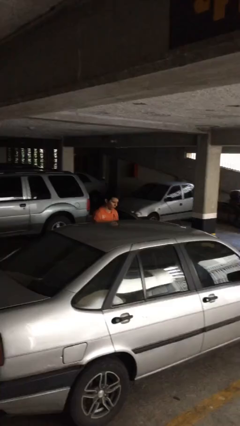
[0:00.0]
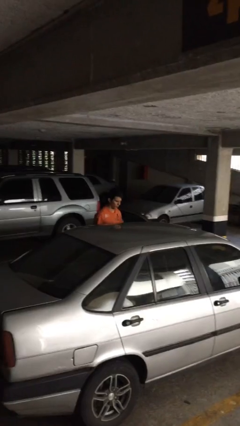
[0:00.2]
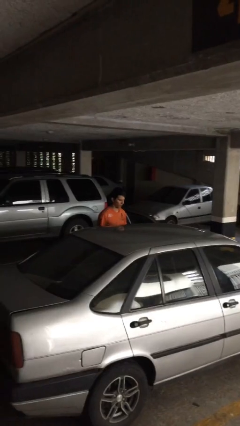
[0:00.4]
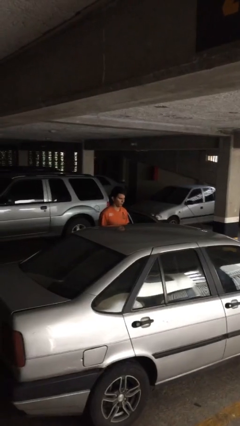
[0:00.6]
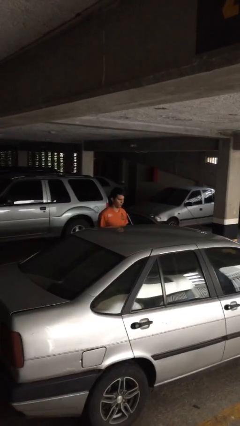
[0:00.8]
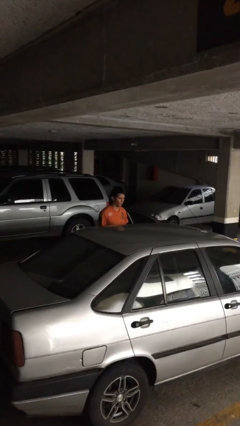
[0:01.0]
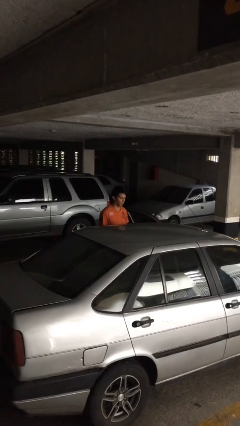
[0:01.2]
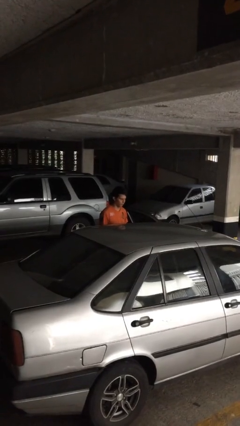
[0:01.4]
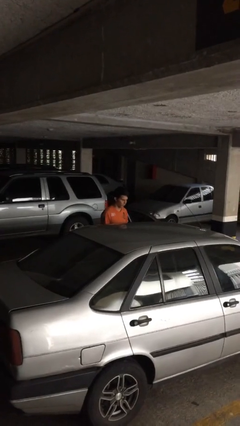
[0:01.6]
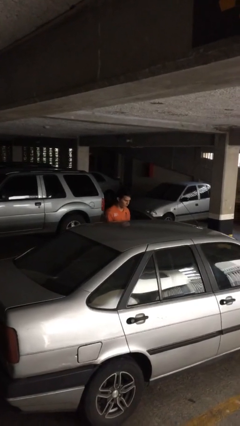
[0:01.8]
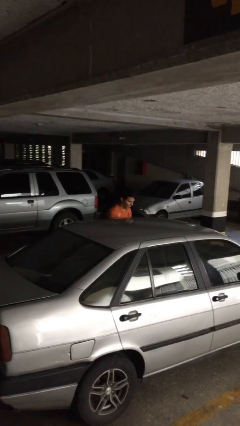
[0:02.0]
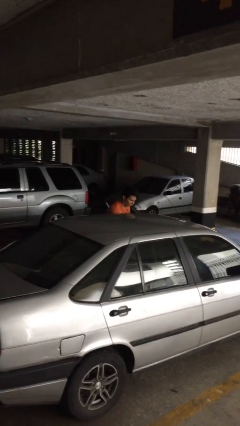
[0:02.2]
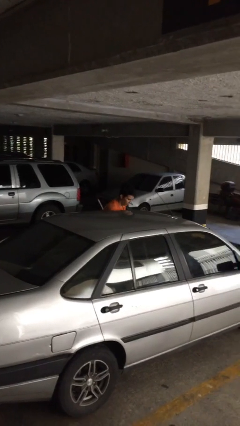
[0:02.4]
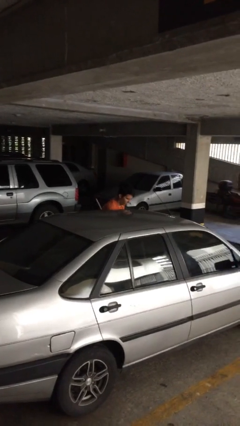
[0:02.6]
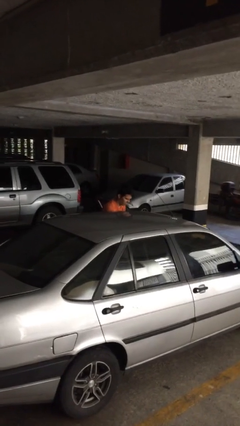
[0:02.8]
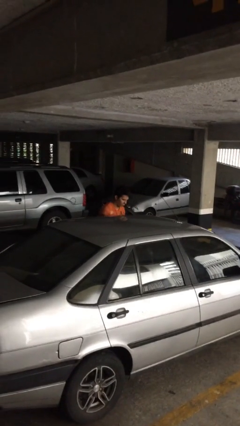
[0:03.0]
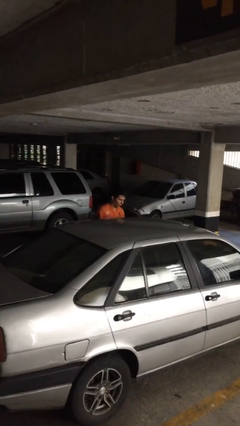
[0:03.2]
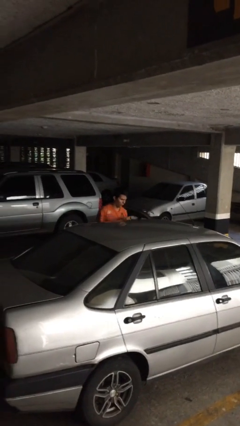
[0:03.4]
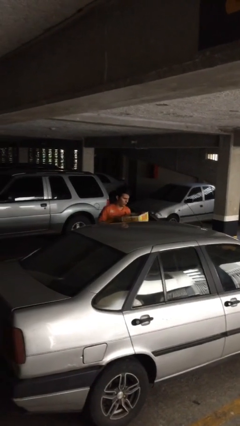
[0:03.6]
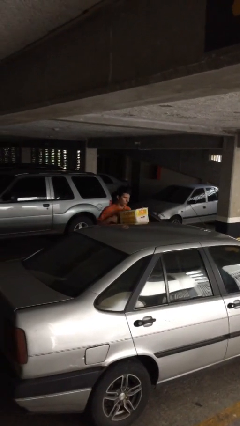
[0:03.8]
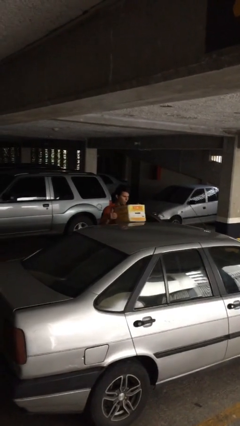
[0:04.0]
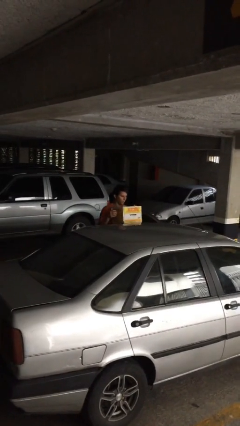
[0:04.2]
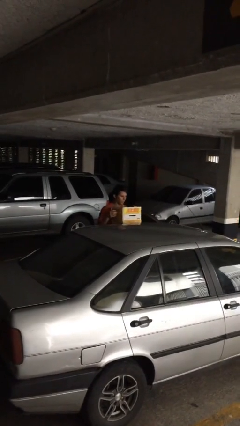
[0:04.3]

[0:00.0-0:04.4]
person unloads car

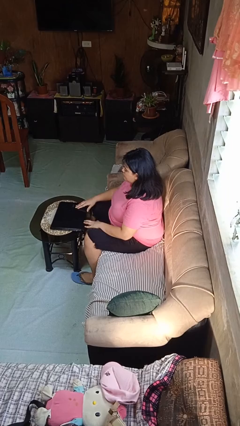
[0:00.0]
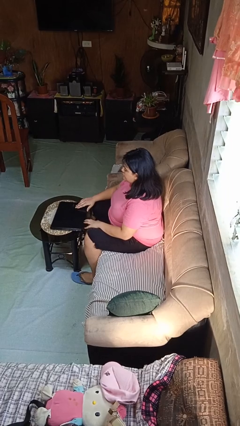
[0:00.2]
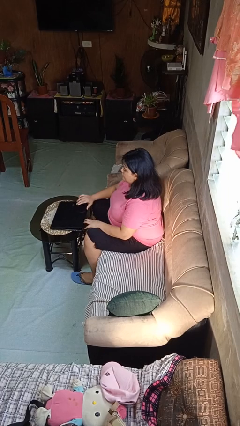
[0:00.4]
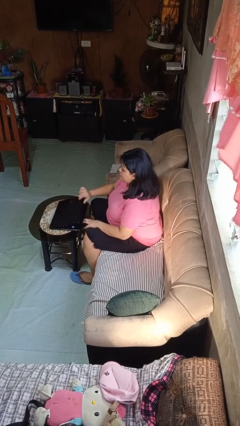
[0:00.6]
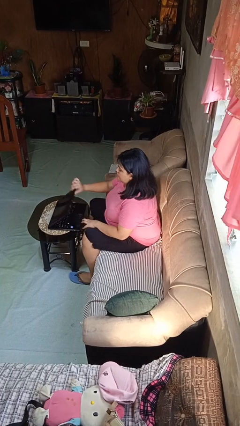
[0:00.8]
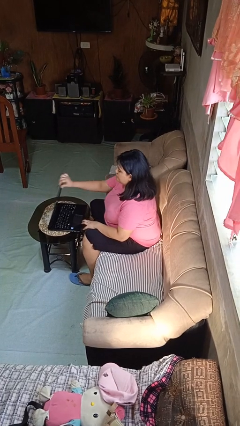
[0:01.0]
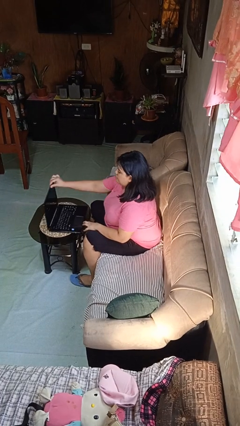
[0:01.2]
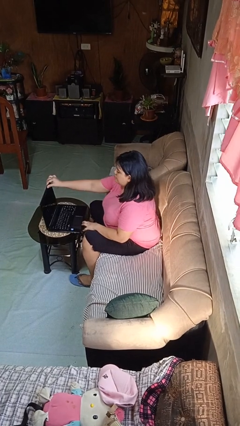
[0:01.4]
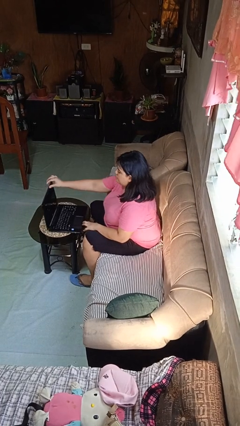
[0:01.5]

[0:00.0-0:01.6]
person opens laptop

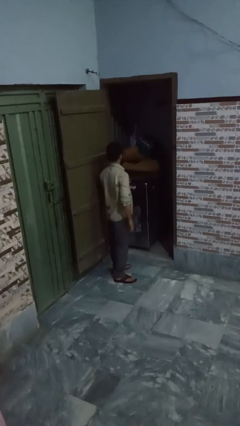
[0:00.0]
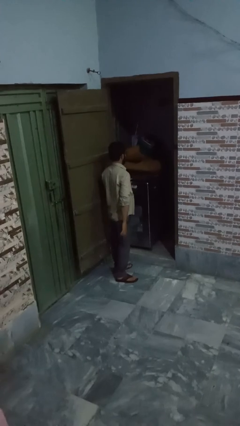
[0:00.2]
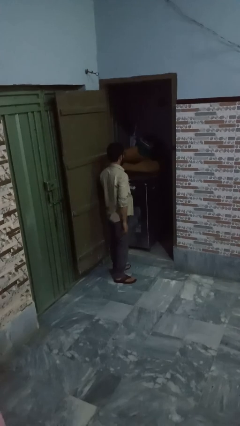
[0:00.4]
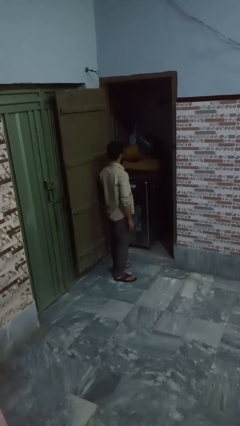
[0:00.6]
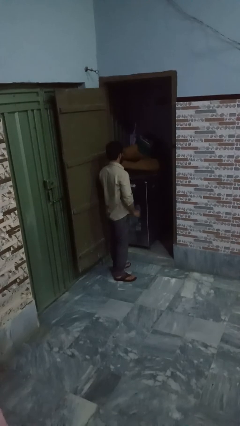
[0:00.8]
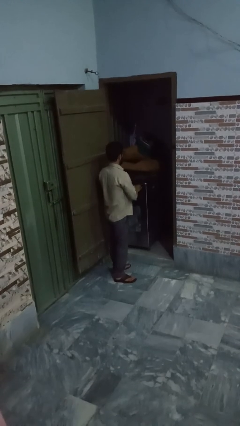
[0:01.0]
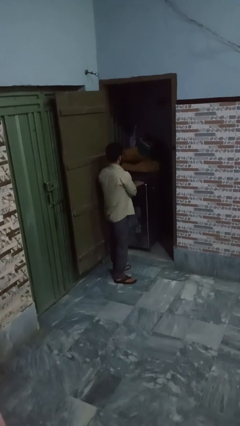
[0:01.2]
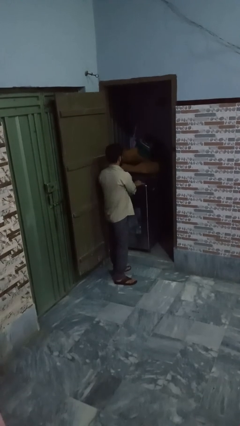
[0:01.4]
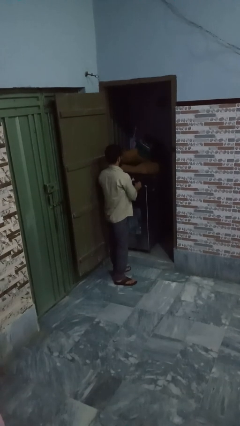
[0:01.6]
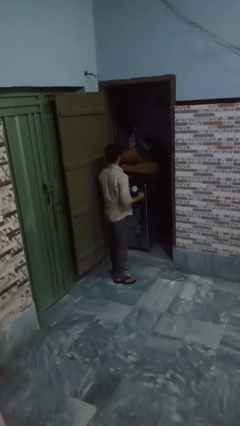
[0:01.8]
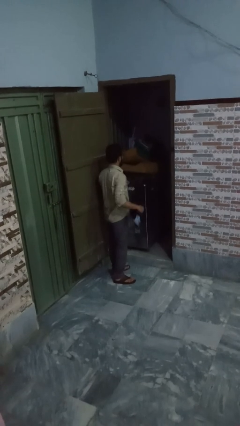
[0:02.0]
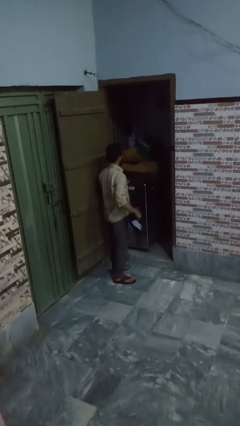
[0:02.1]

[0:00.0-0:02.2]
person unloads dryer

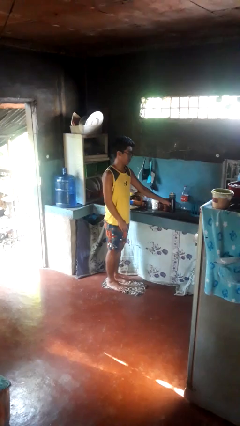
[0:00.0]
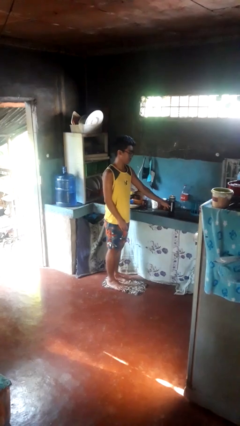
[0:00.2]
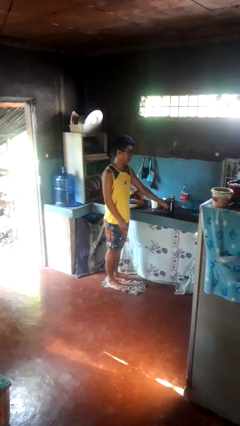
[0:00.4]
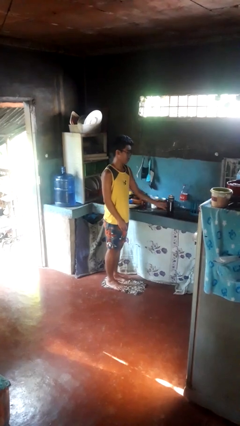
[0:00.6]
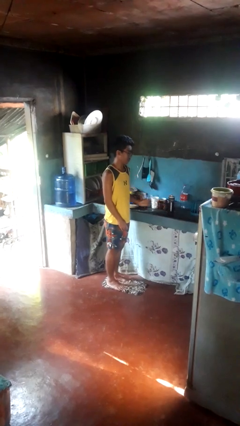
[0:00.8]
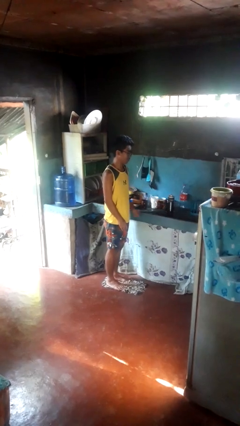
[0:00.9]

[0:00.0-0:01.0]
person puts down object on countertop

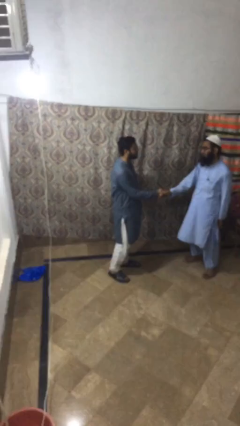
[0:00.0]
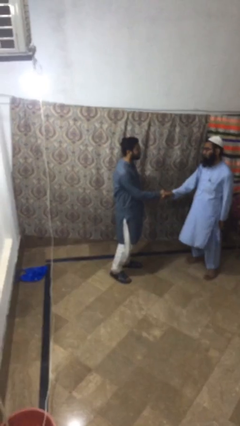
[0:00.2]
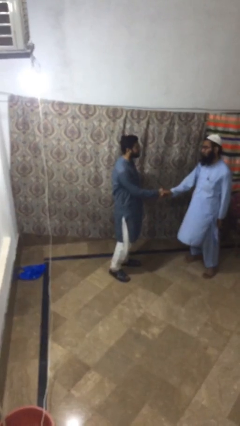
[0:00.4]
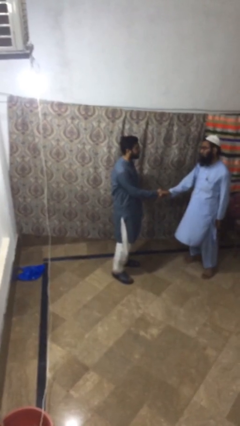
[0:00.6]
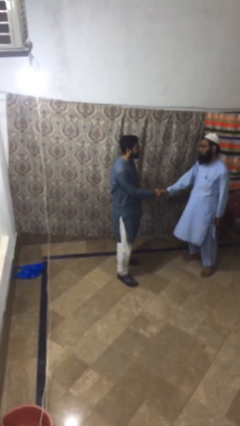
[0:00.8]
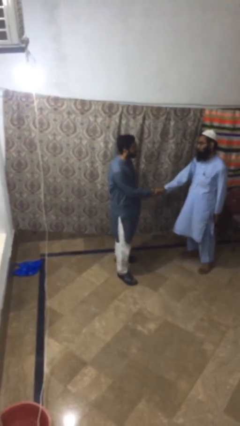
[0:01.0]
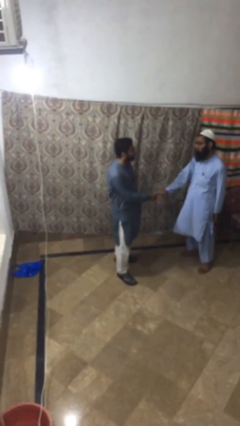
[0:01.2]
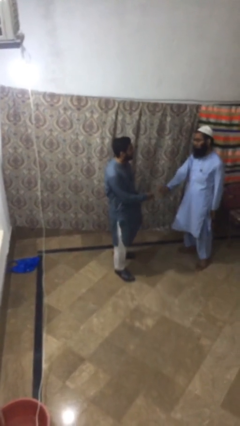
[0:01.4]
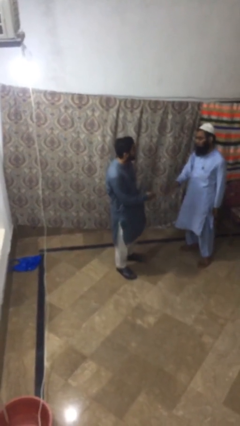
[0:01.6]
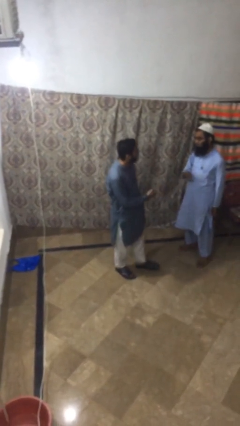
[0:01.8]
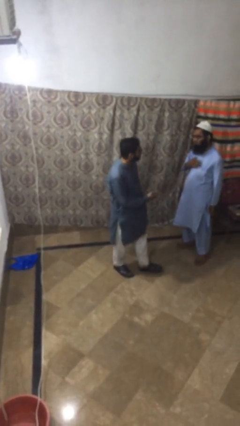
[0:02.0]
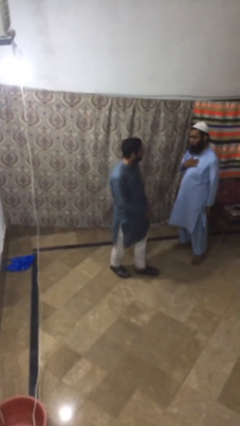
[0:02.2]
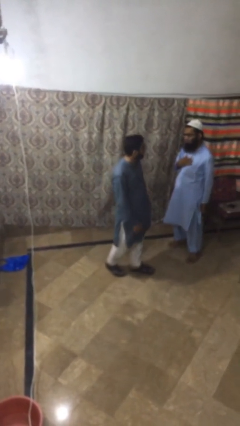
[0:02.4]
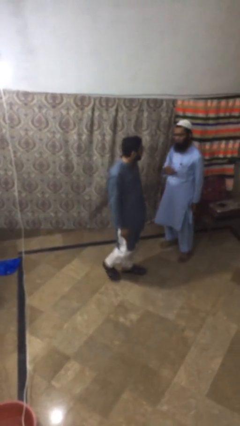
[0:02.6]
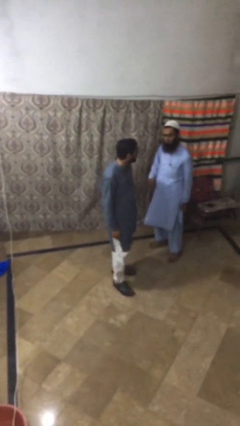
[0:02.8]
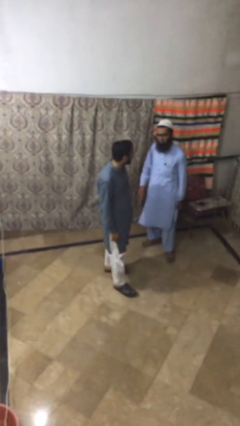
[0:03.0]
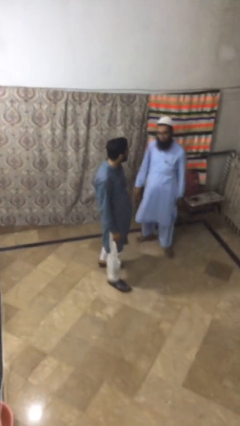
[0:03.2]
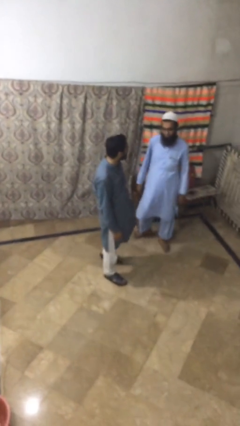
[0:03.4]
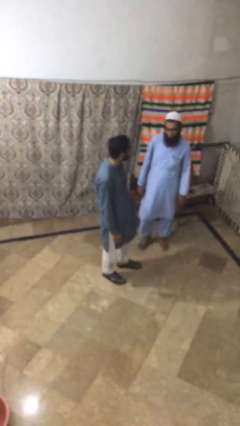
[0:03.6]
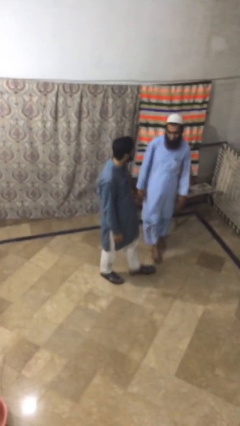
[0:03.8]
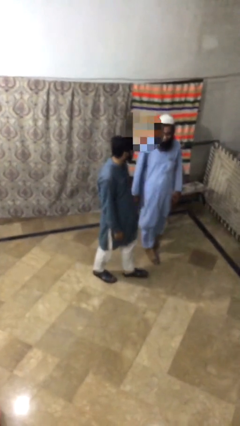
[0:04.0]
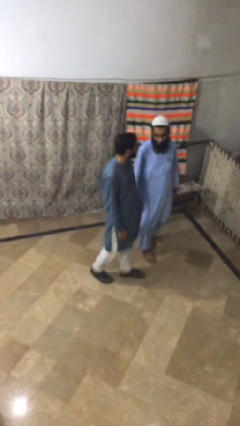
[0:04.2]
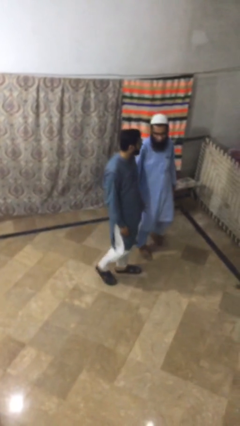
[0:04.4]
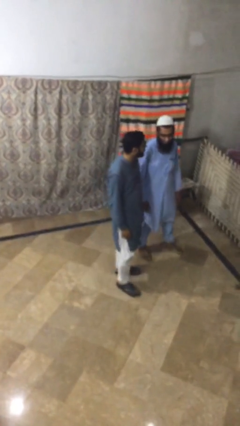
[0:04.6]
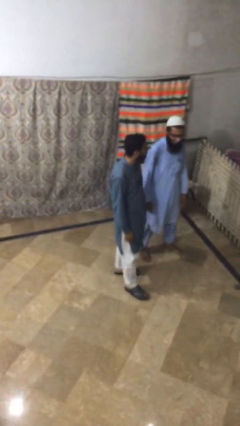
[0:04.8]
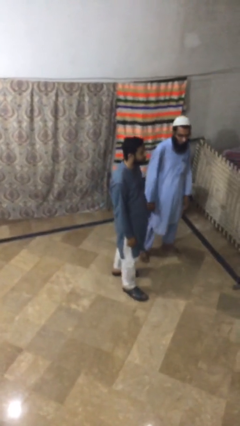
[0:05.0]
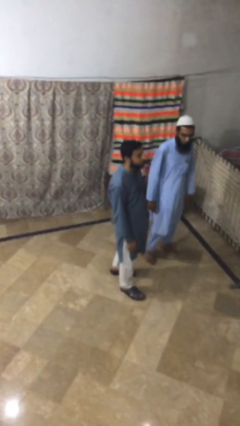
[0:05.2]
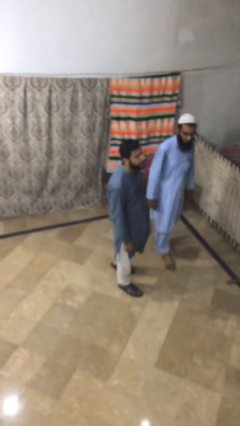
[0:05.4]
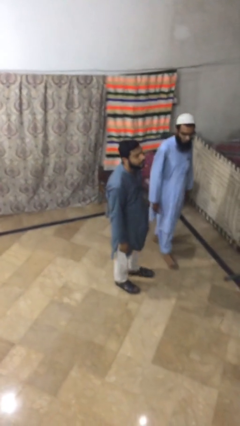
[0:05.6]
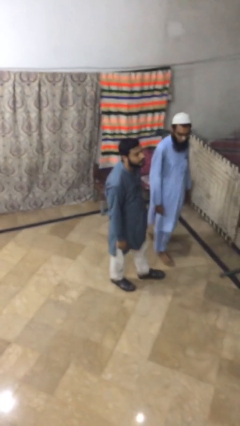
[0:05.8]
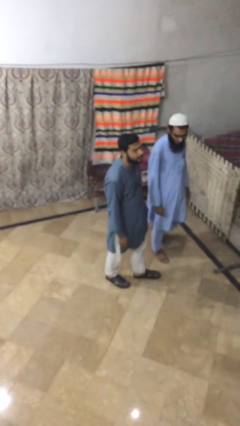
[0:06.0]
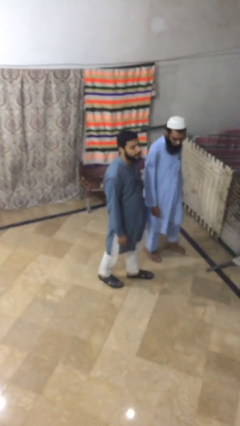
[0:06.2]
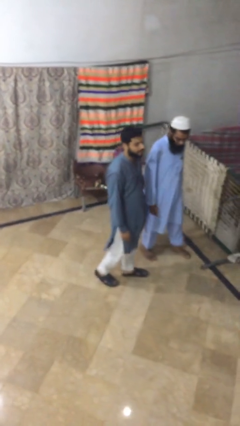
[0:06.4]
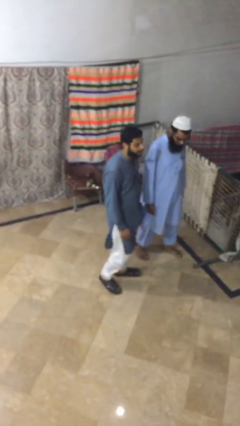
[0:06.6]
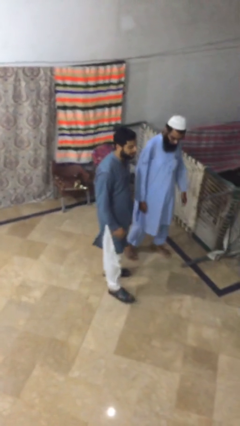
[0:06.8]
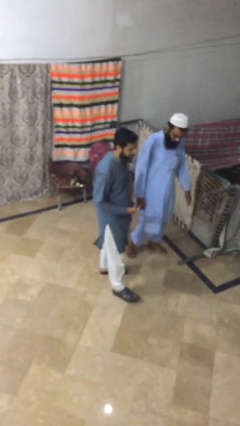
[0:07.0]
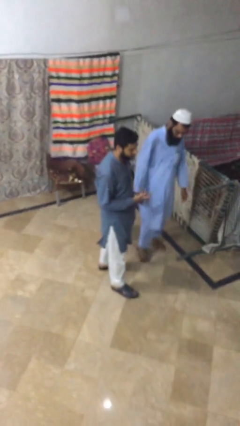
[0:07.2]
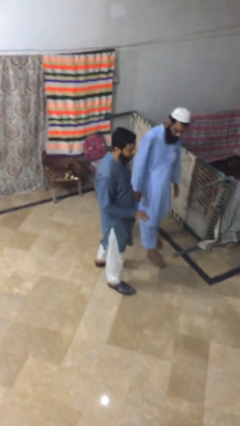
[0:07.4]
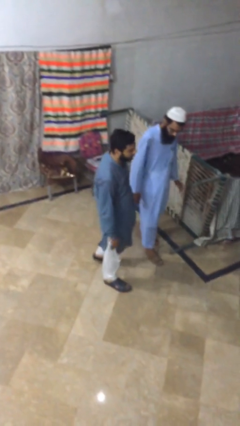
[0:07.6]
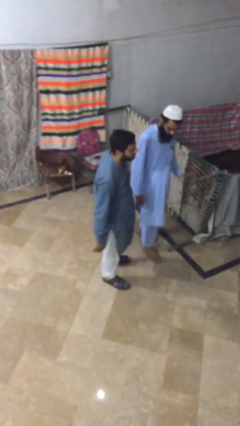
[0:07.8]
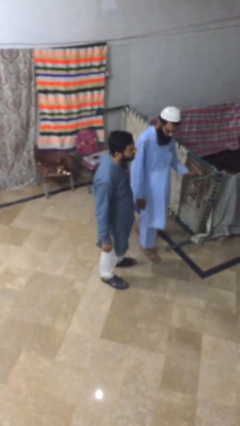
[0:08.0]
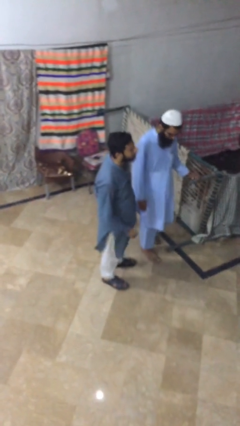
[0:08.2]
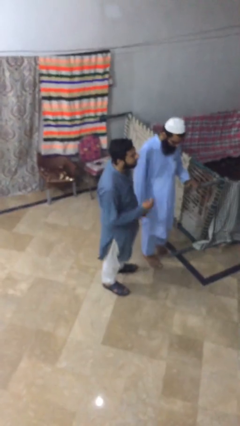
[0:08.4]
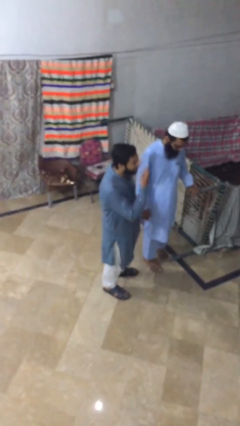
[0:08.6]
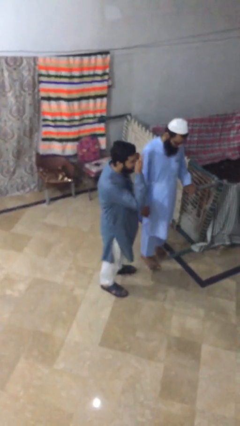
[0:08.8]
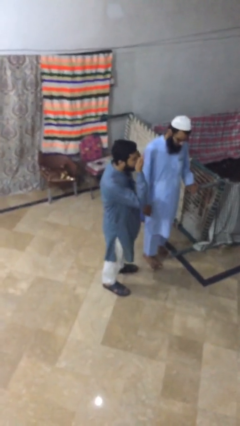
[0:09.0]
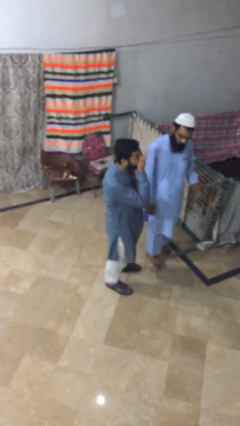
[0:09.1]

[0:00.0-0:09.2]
person talks to person
